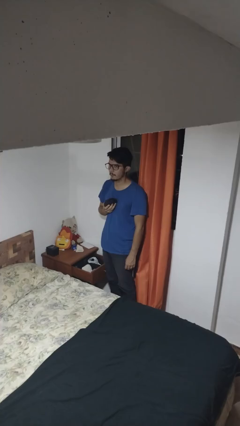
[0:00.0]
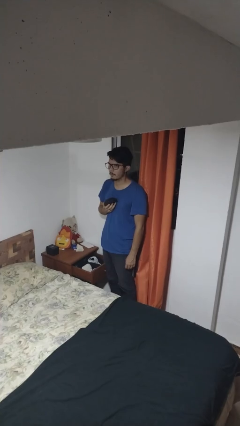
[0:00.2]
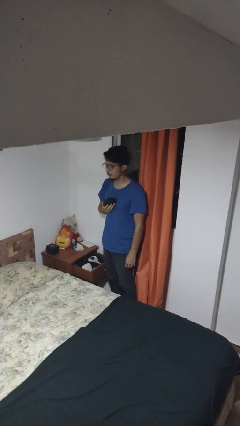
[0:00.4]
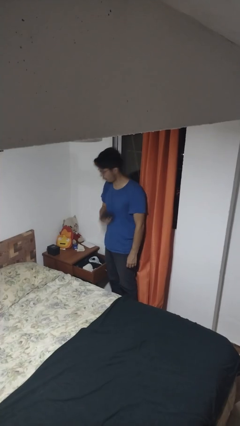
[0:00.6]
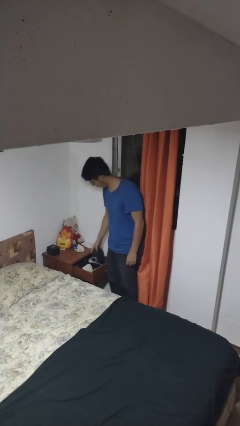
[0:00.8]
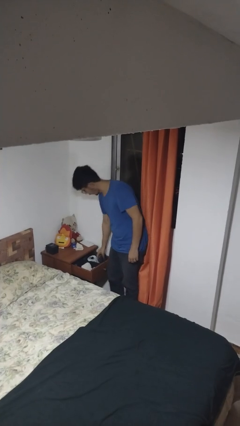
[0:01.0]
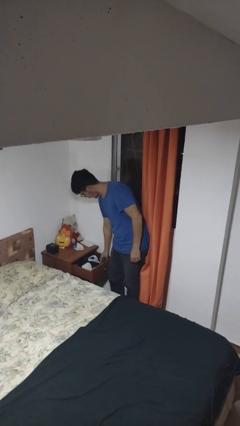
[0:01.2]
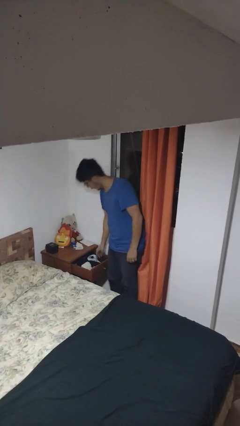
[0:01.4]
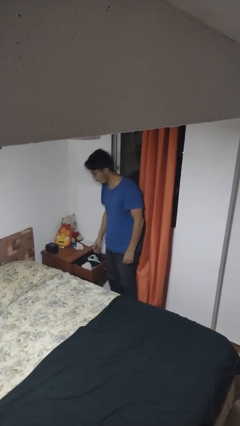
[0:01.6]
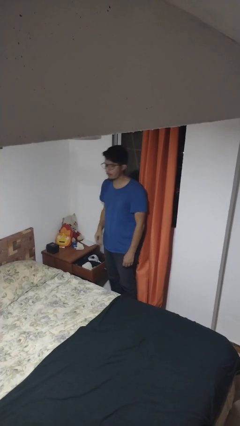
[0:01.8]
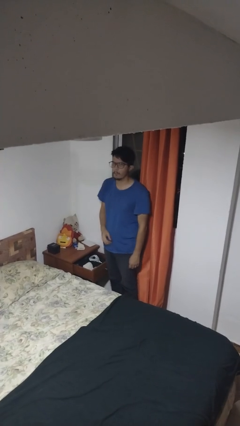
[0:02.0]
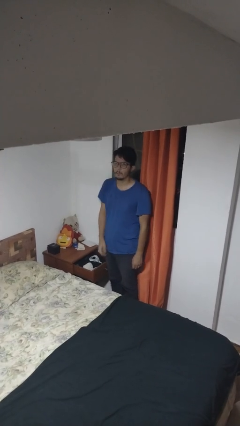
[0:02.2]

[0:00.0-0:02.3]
person puts clothes into dresser

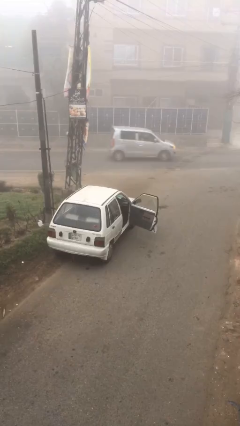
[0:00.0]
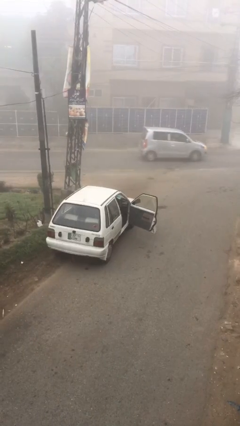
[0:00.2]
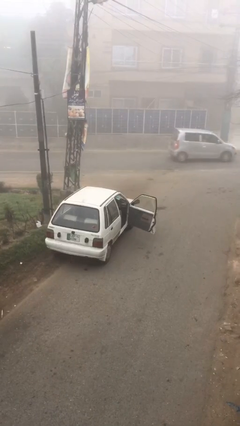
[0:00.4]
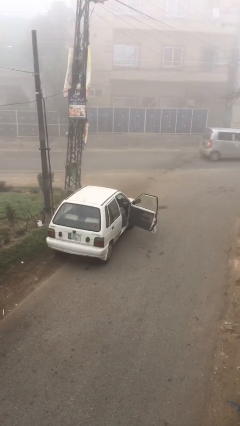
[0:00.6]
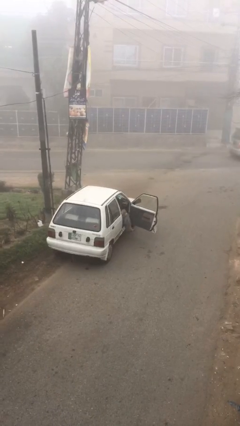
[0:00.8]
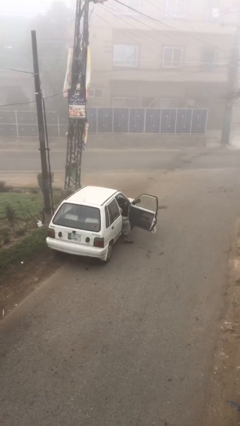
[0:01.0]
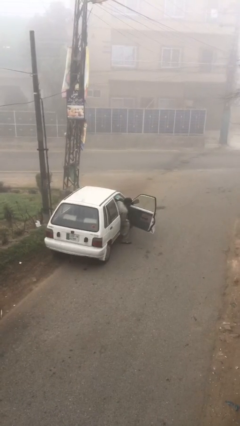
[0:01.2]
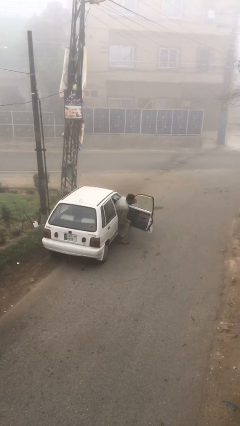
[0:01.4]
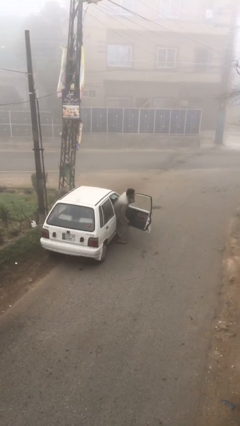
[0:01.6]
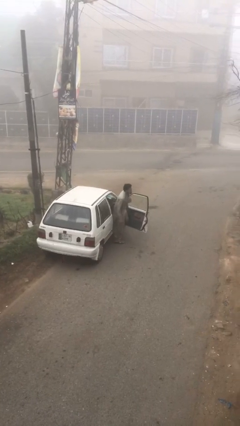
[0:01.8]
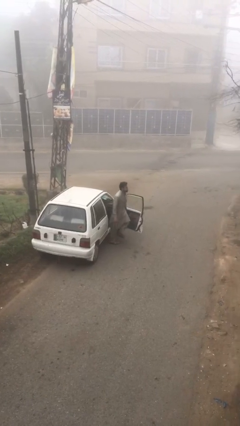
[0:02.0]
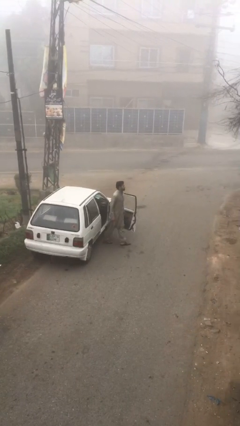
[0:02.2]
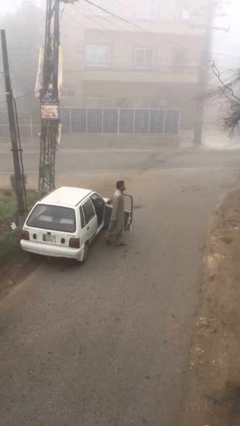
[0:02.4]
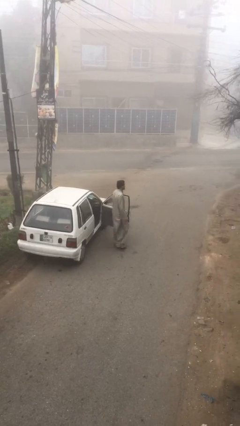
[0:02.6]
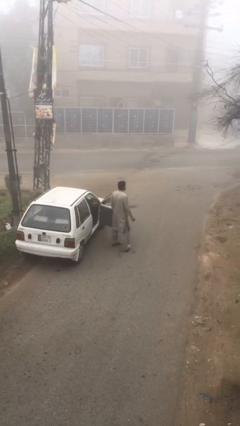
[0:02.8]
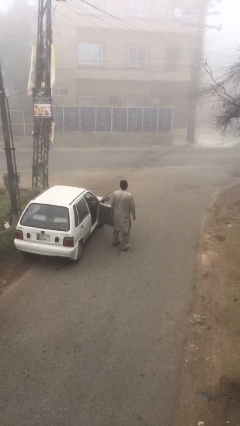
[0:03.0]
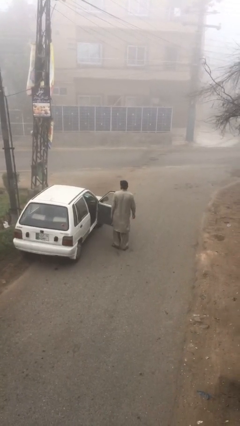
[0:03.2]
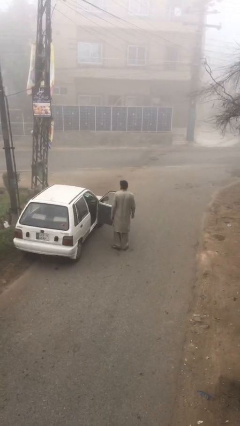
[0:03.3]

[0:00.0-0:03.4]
person exits car

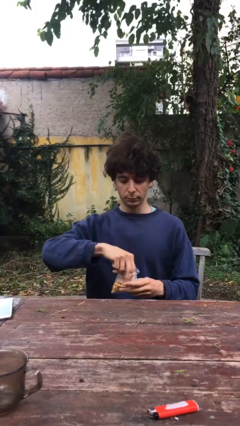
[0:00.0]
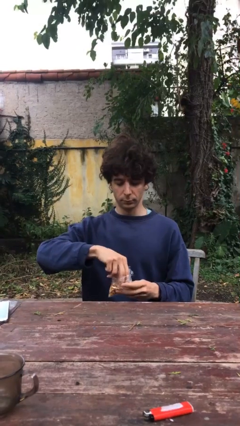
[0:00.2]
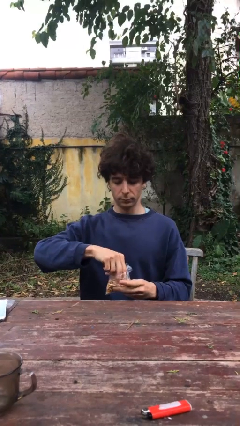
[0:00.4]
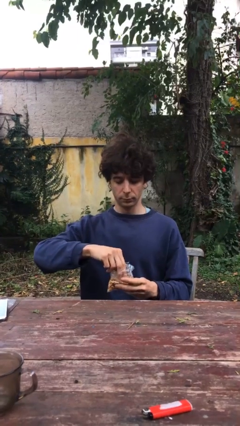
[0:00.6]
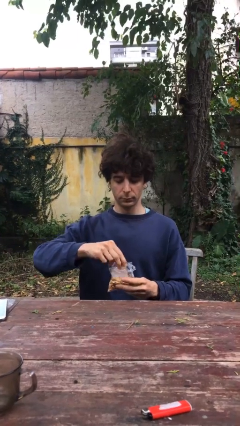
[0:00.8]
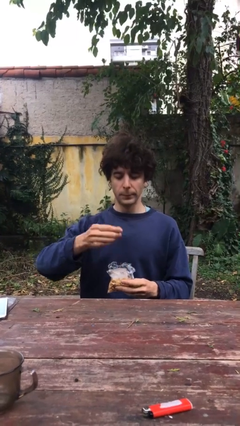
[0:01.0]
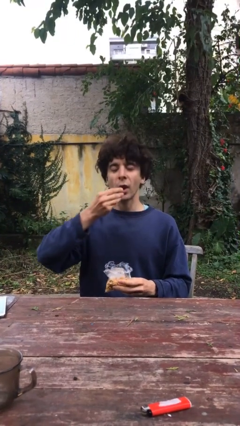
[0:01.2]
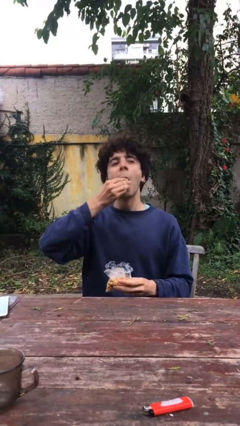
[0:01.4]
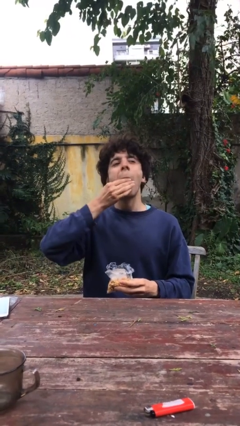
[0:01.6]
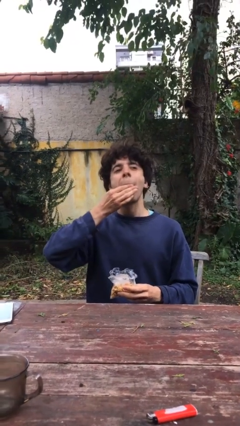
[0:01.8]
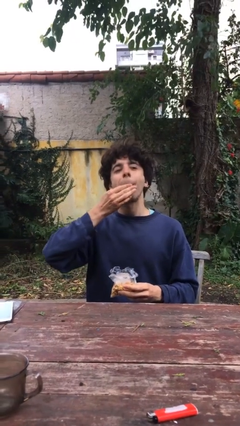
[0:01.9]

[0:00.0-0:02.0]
person eats snack from bag

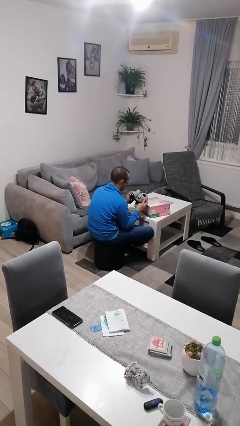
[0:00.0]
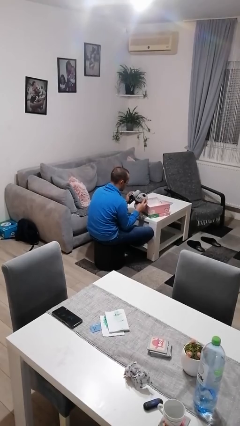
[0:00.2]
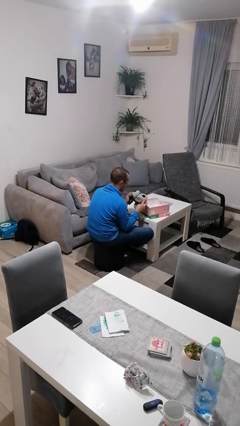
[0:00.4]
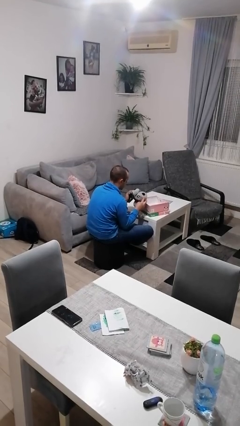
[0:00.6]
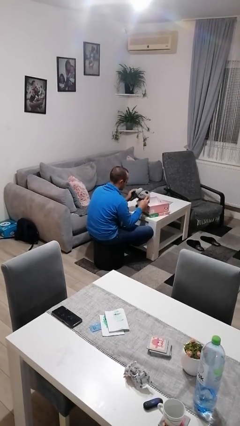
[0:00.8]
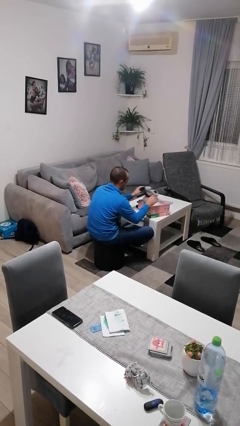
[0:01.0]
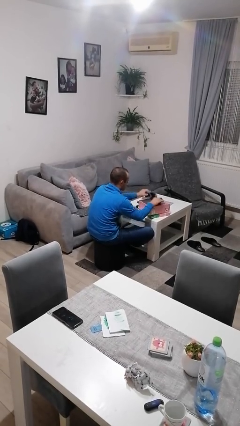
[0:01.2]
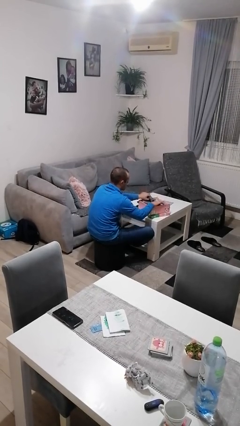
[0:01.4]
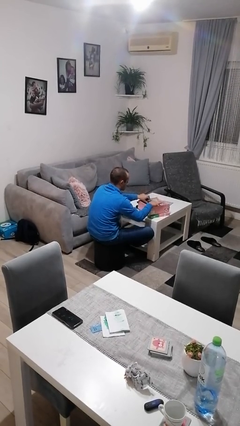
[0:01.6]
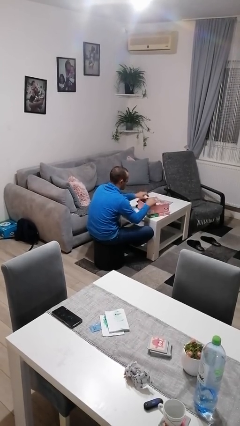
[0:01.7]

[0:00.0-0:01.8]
person puts object into box

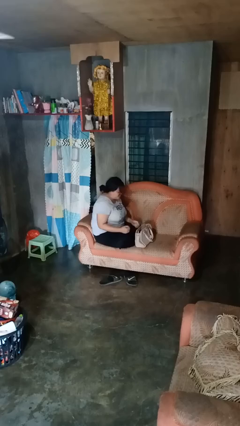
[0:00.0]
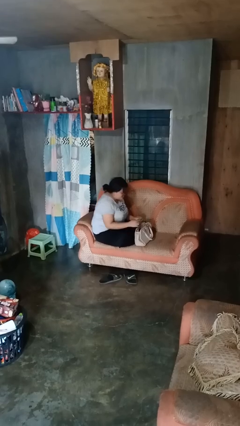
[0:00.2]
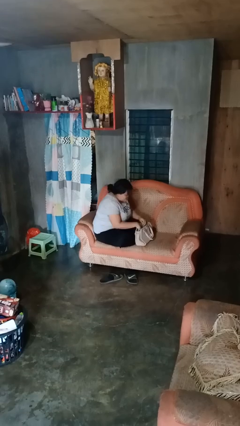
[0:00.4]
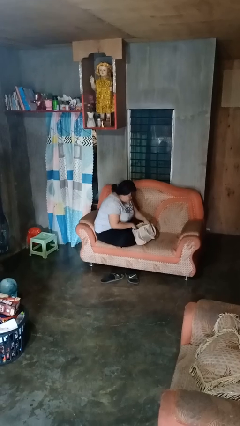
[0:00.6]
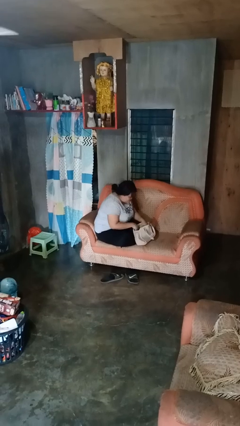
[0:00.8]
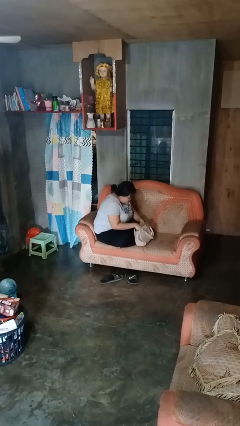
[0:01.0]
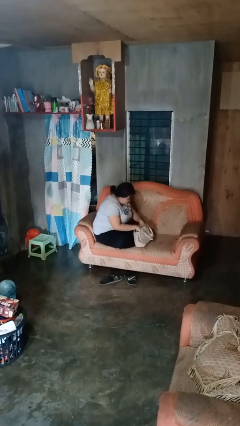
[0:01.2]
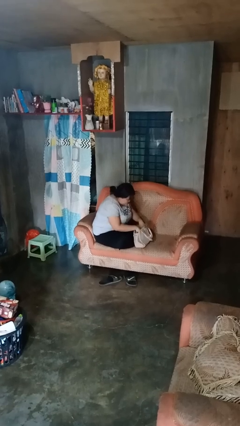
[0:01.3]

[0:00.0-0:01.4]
person searches in purse

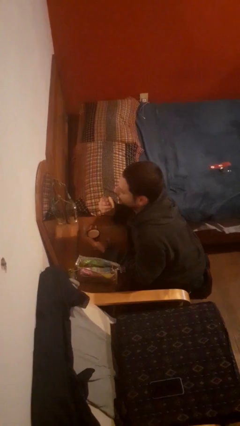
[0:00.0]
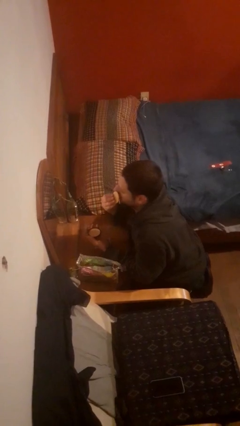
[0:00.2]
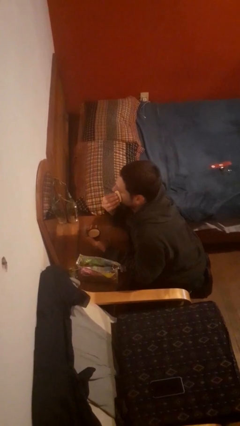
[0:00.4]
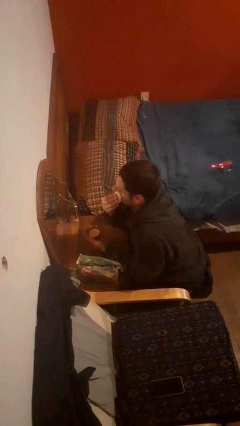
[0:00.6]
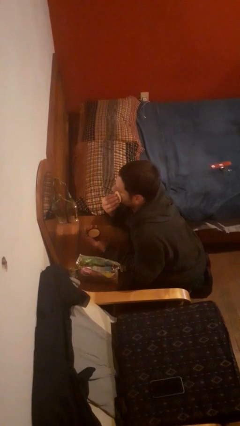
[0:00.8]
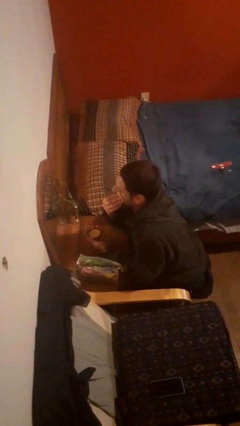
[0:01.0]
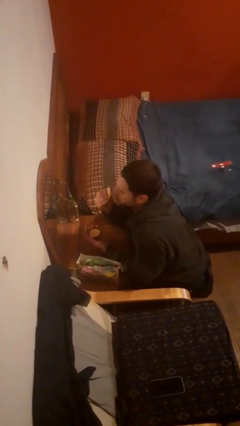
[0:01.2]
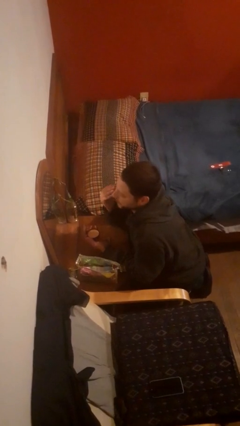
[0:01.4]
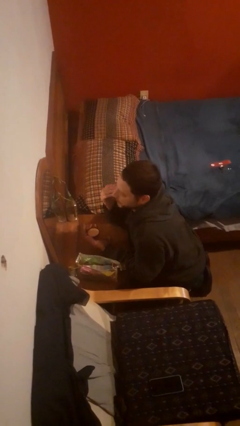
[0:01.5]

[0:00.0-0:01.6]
person applies foundation makeup

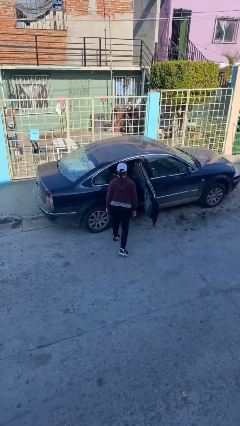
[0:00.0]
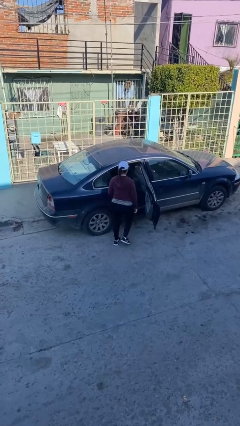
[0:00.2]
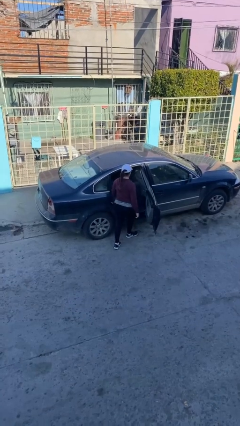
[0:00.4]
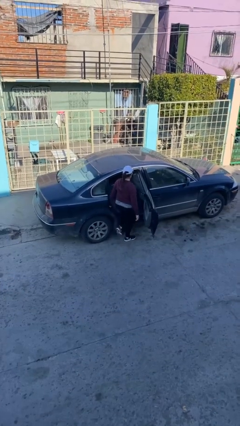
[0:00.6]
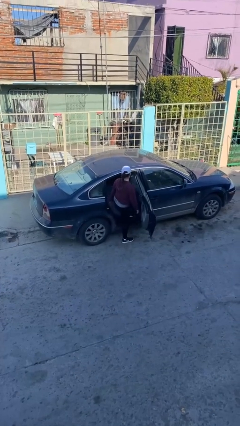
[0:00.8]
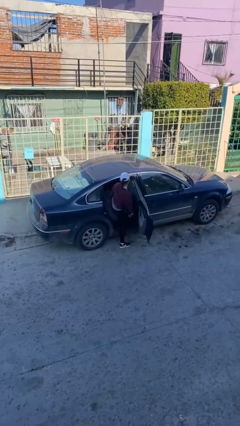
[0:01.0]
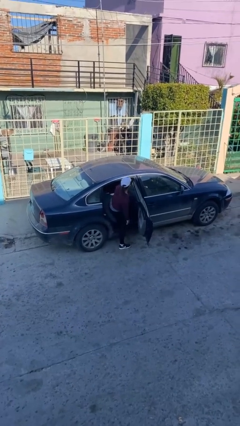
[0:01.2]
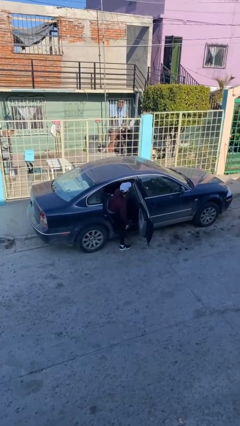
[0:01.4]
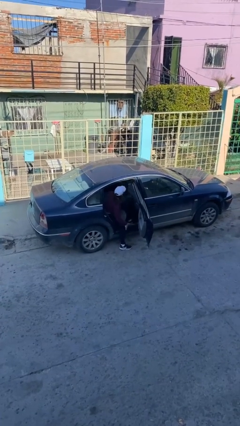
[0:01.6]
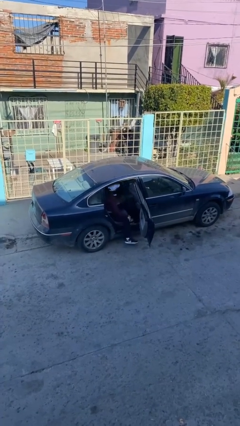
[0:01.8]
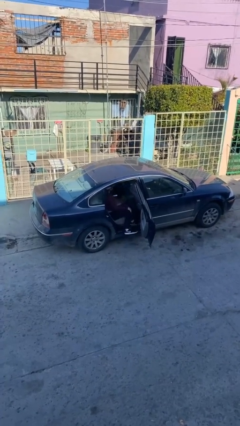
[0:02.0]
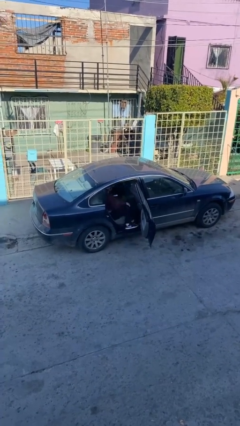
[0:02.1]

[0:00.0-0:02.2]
person enters car

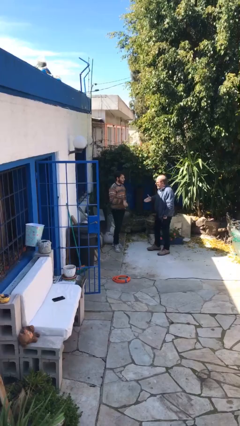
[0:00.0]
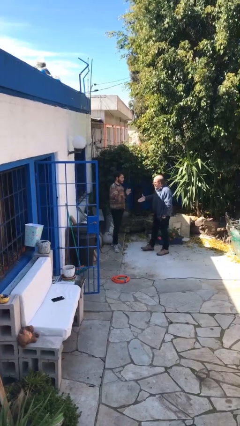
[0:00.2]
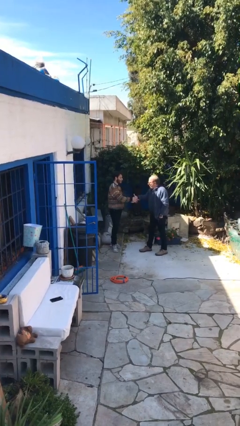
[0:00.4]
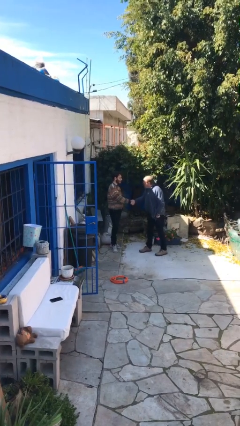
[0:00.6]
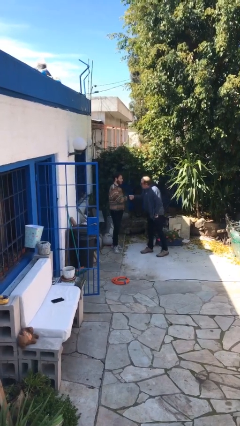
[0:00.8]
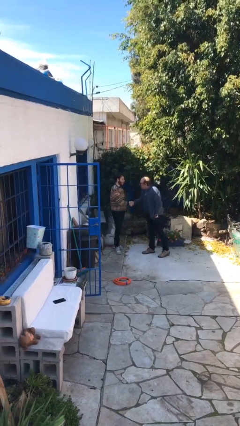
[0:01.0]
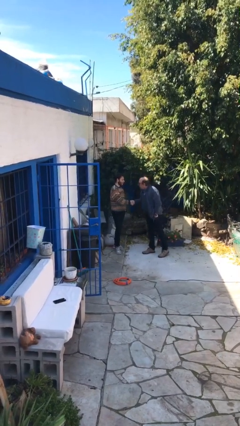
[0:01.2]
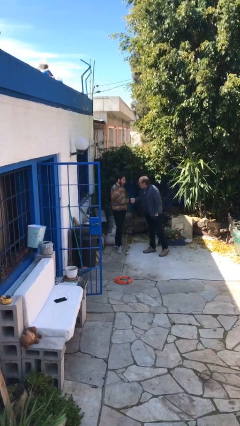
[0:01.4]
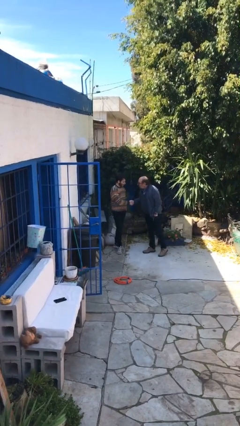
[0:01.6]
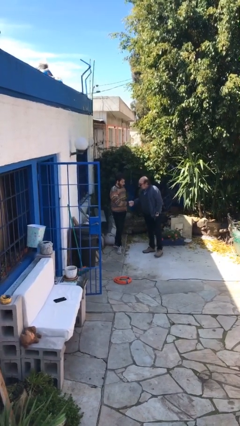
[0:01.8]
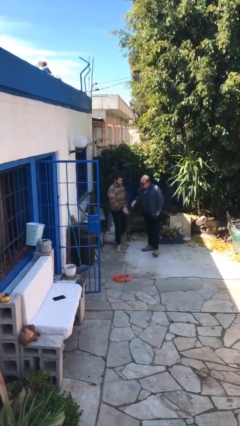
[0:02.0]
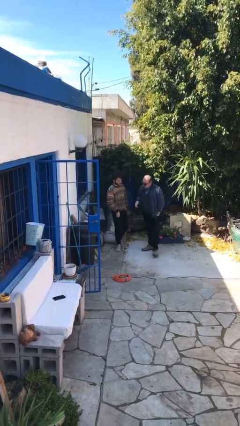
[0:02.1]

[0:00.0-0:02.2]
person shakes hand
